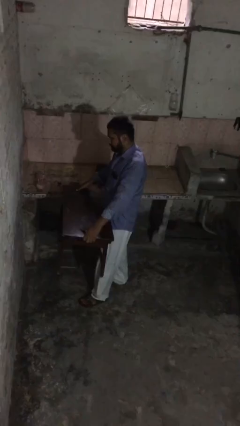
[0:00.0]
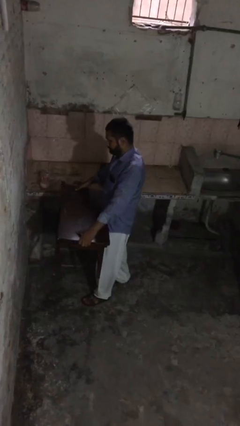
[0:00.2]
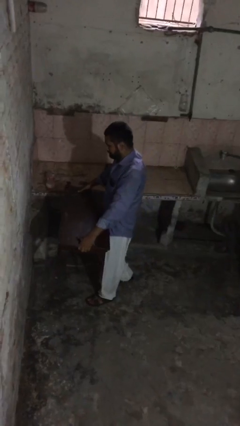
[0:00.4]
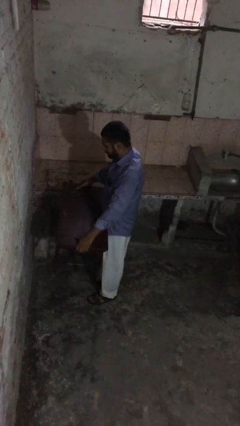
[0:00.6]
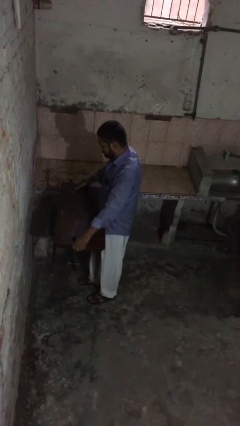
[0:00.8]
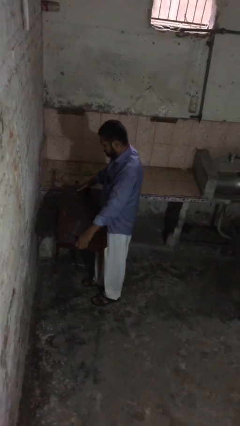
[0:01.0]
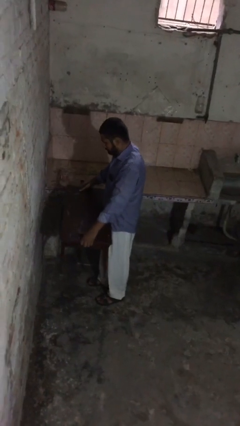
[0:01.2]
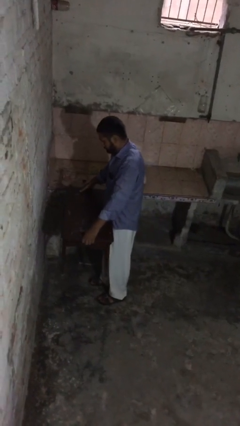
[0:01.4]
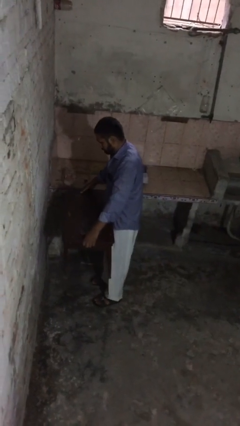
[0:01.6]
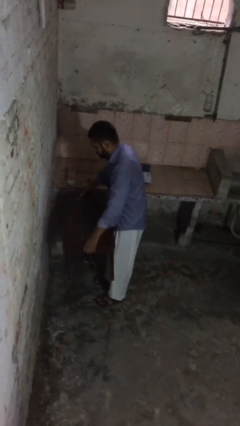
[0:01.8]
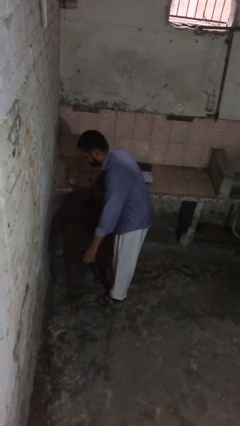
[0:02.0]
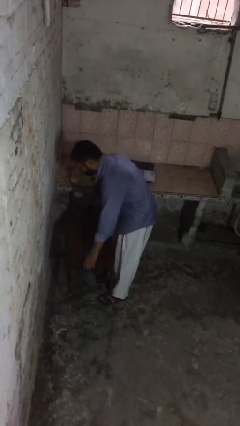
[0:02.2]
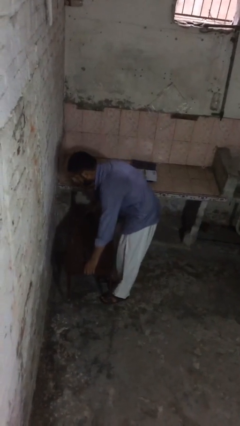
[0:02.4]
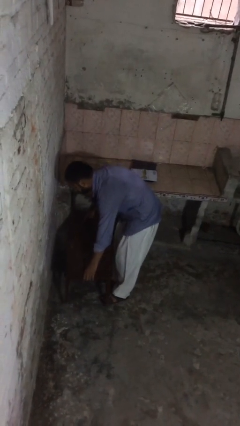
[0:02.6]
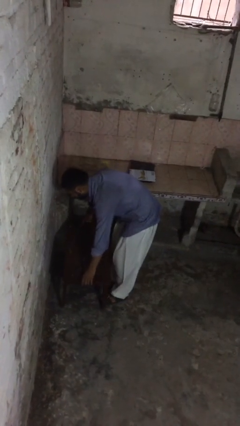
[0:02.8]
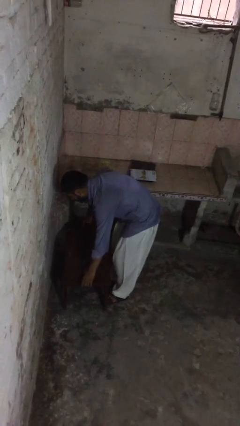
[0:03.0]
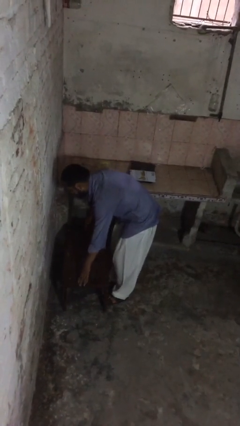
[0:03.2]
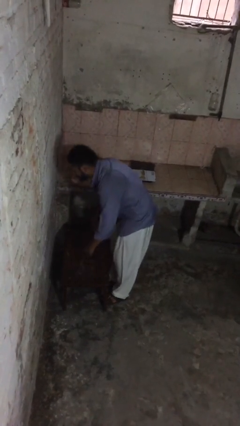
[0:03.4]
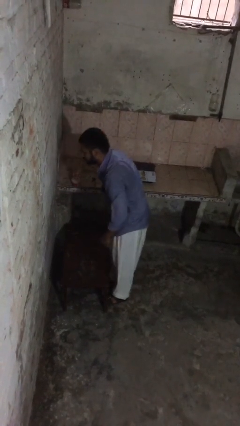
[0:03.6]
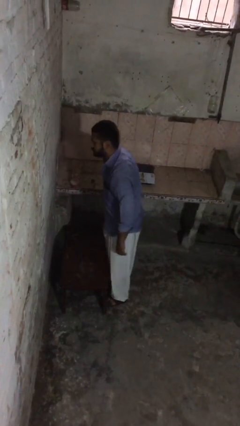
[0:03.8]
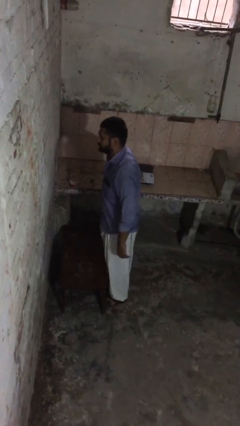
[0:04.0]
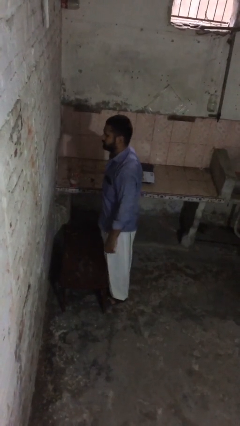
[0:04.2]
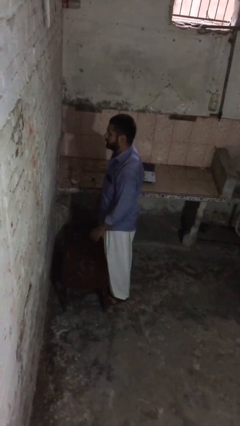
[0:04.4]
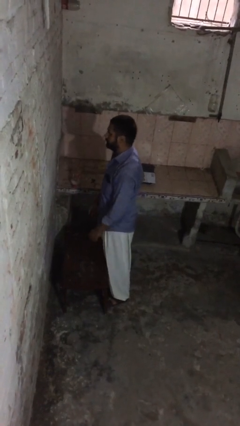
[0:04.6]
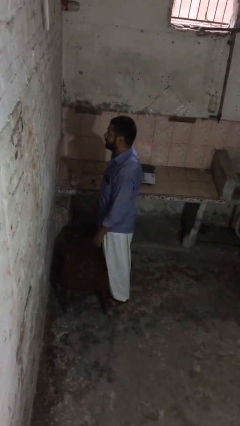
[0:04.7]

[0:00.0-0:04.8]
person puts down object on floor

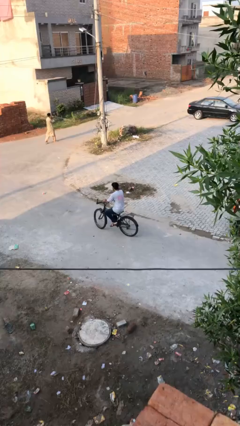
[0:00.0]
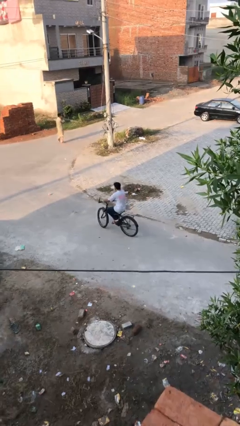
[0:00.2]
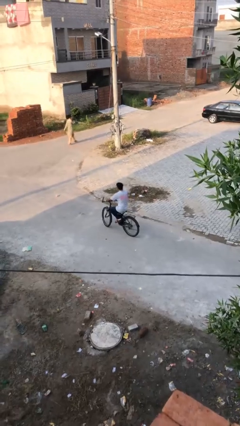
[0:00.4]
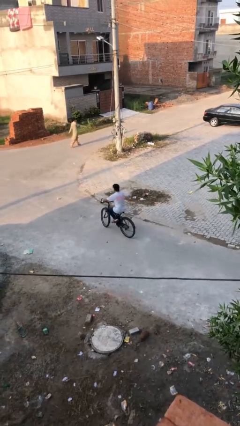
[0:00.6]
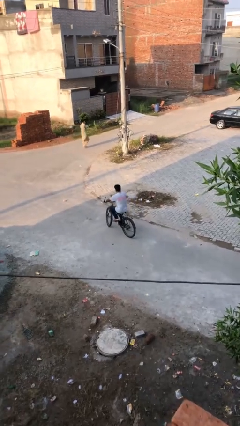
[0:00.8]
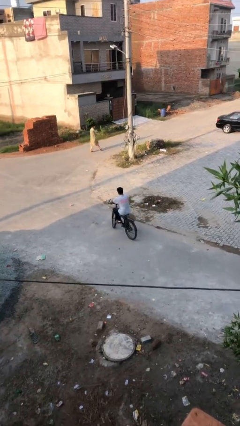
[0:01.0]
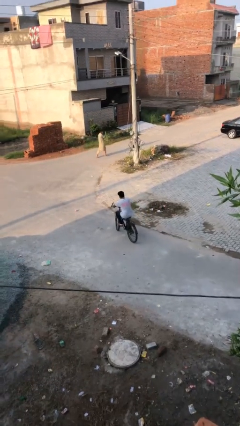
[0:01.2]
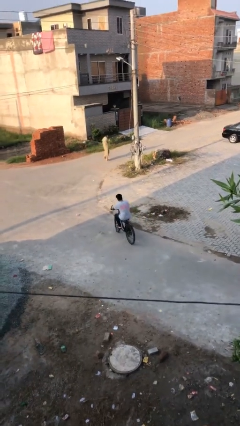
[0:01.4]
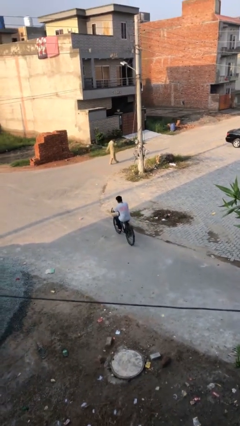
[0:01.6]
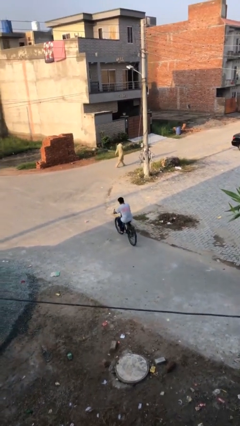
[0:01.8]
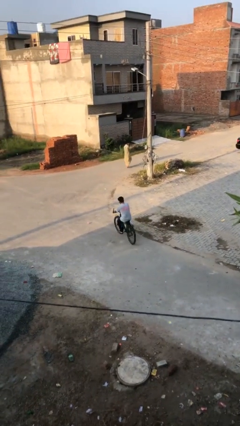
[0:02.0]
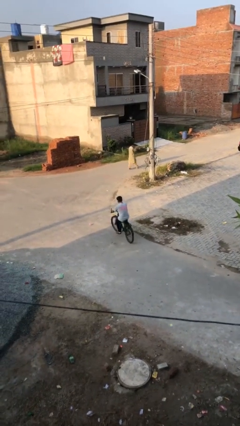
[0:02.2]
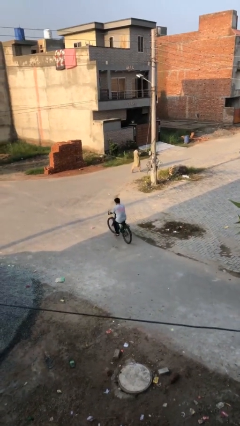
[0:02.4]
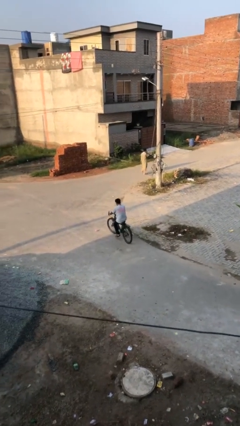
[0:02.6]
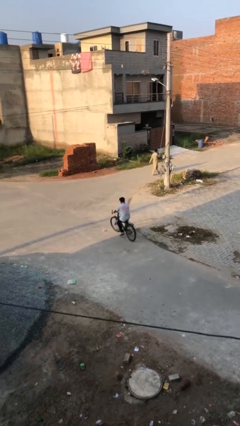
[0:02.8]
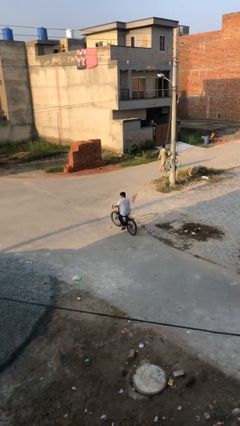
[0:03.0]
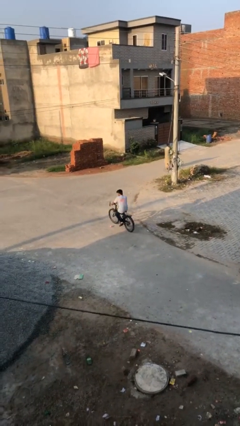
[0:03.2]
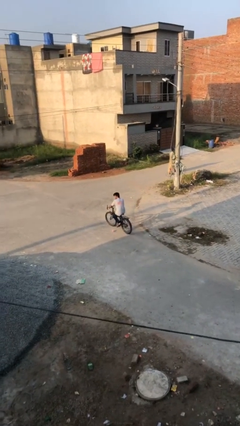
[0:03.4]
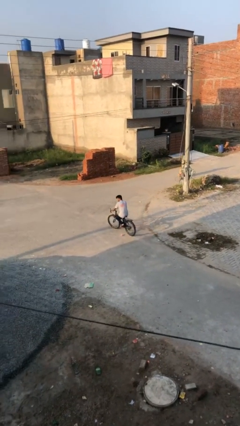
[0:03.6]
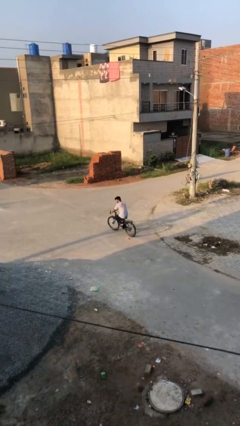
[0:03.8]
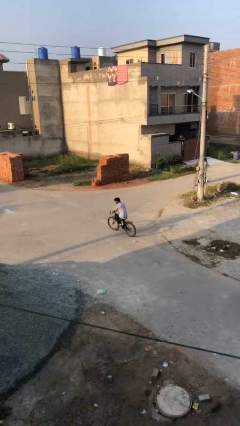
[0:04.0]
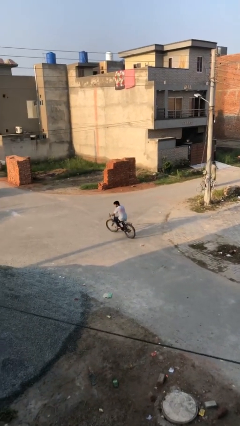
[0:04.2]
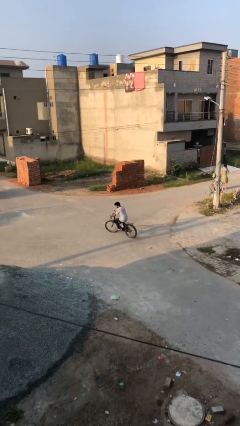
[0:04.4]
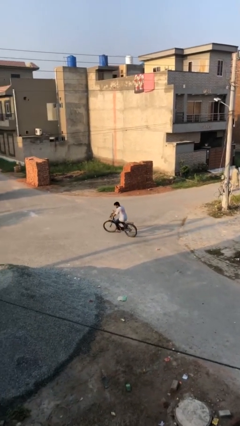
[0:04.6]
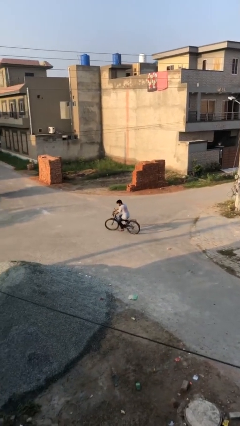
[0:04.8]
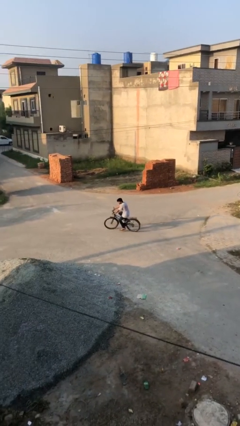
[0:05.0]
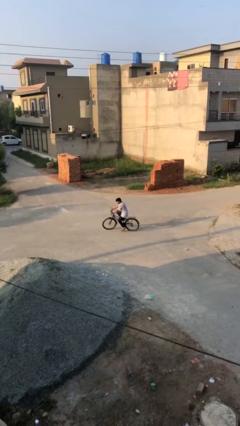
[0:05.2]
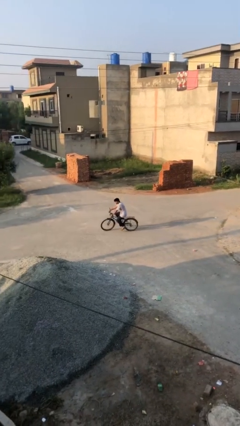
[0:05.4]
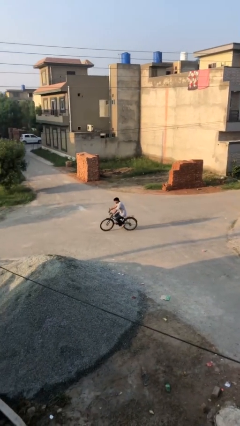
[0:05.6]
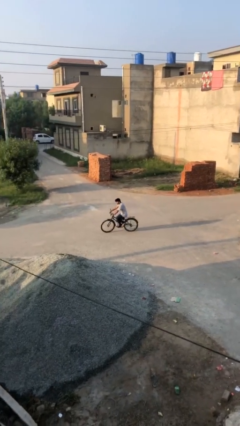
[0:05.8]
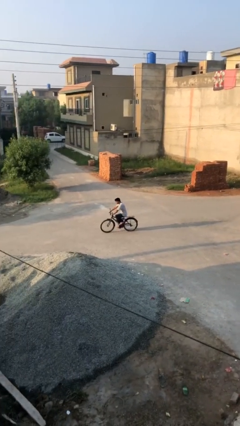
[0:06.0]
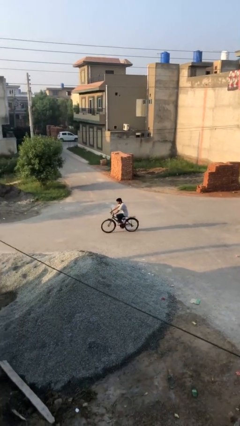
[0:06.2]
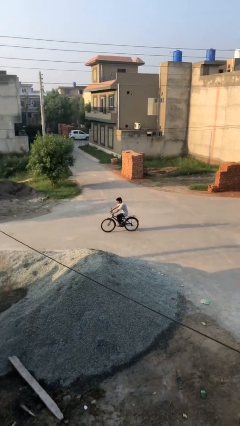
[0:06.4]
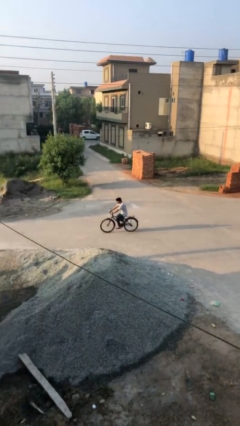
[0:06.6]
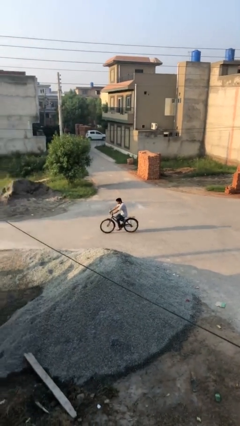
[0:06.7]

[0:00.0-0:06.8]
person rides bicycle

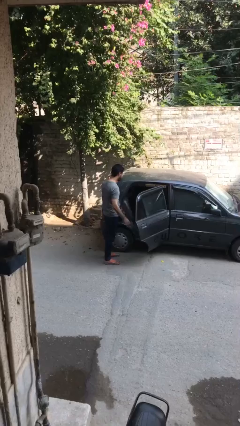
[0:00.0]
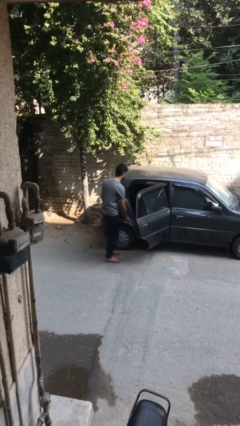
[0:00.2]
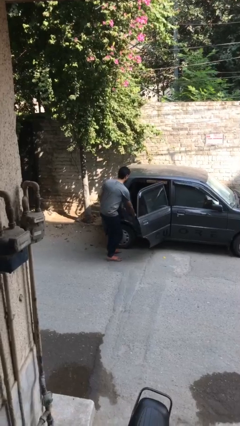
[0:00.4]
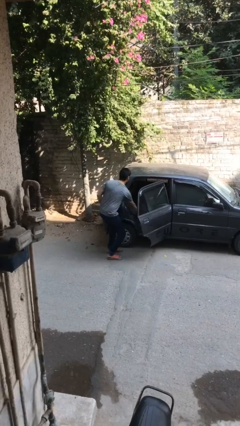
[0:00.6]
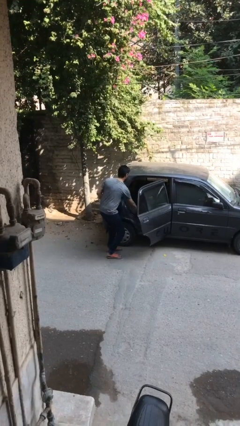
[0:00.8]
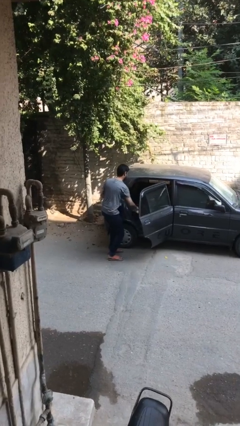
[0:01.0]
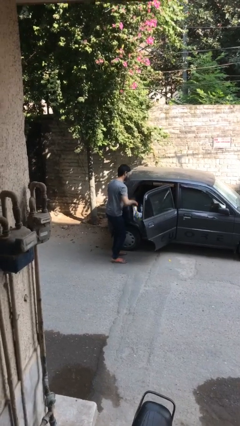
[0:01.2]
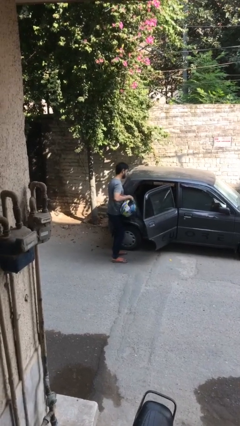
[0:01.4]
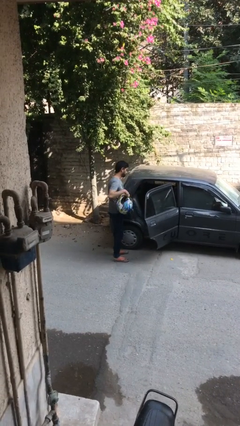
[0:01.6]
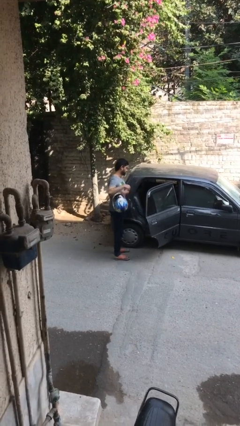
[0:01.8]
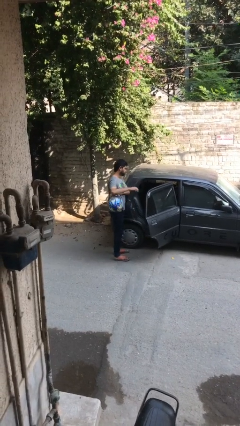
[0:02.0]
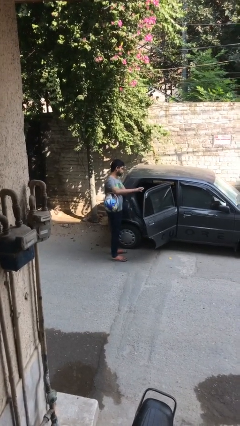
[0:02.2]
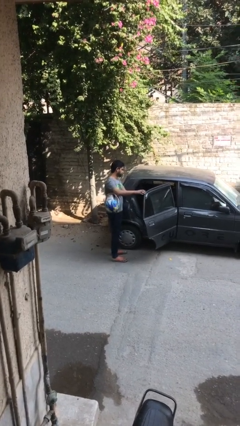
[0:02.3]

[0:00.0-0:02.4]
person unloads car

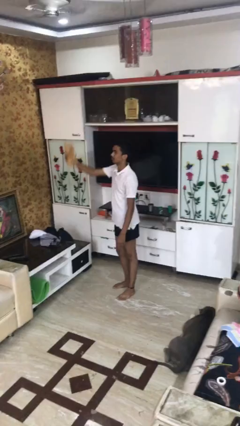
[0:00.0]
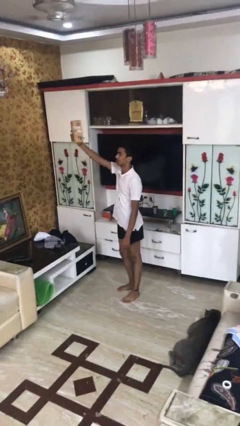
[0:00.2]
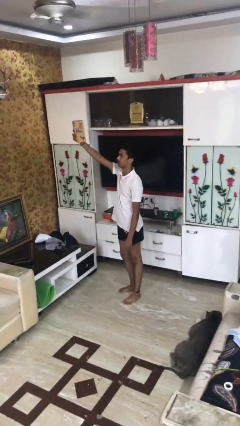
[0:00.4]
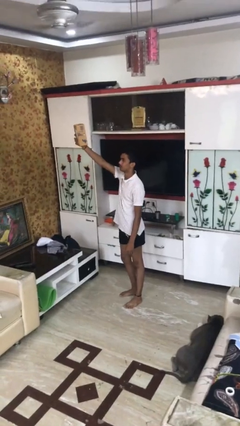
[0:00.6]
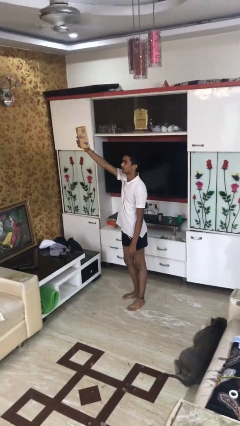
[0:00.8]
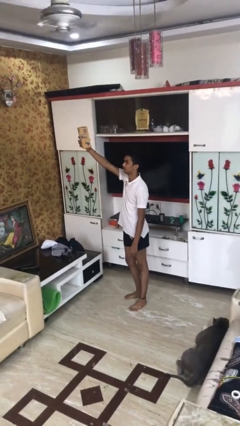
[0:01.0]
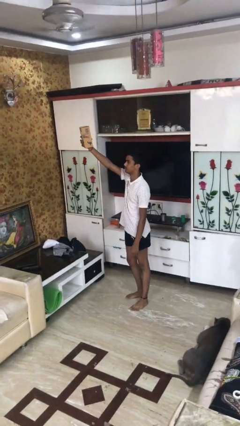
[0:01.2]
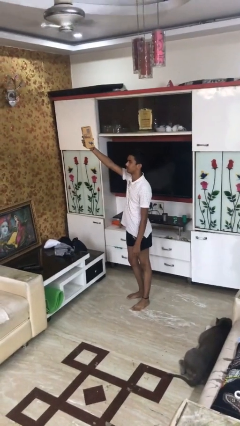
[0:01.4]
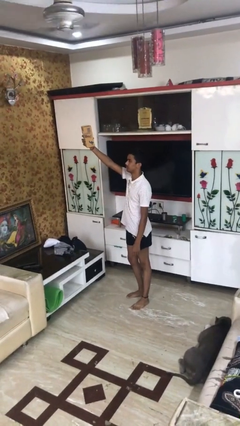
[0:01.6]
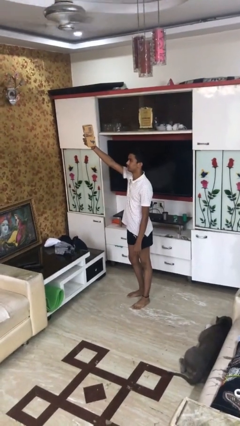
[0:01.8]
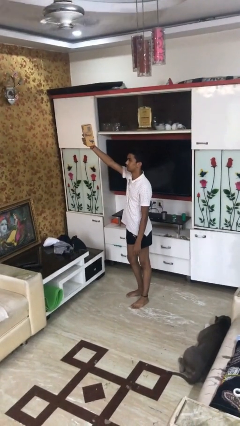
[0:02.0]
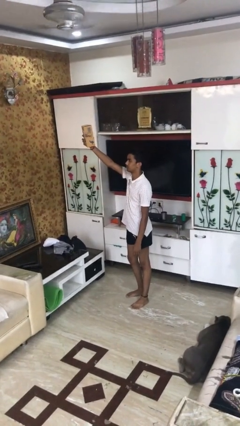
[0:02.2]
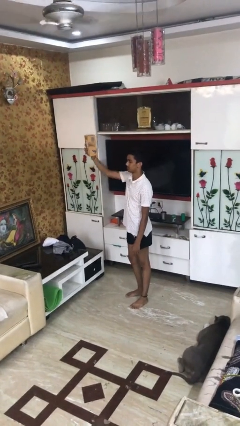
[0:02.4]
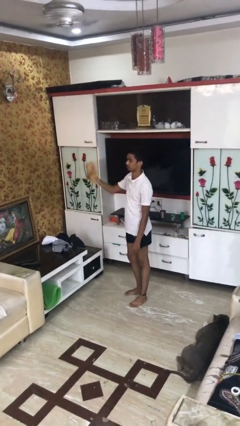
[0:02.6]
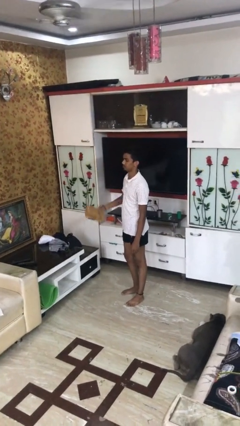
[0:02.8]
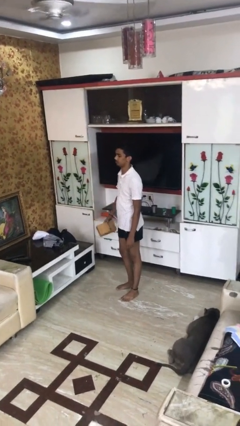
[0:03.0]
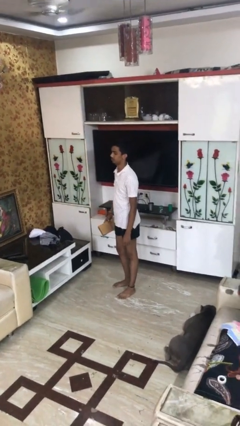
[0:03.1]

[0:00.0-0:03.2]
person holds object above head

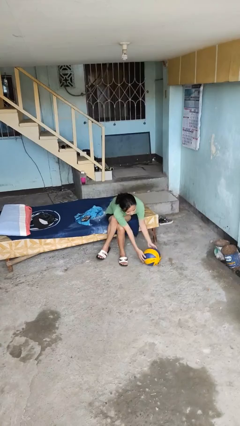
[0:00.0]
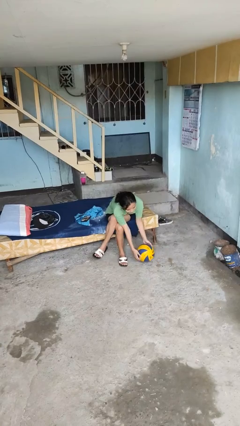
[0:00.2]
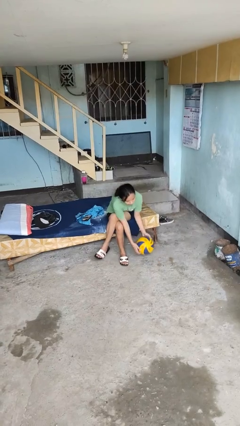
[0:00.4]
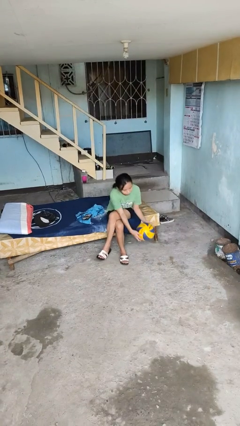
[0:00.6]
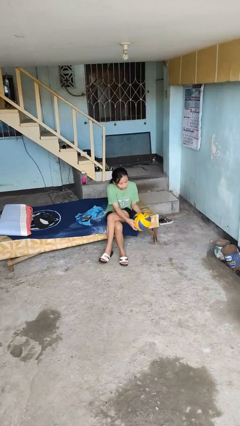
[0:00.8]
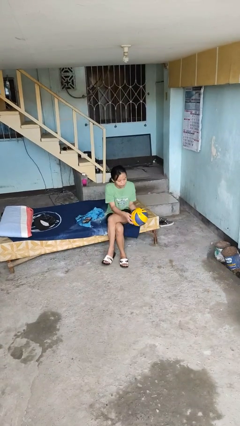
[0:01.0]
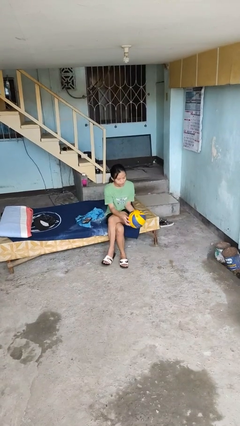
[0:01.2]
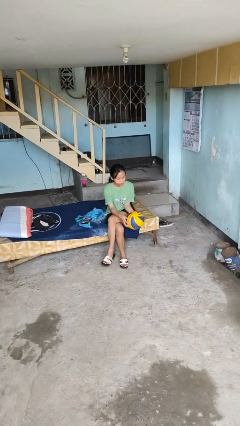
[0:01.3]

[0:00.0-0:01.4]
person picks up object from floor
